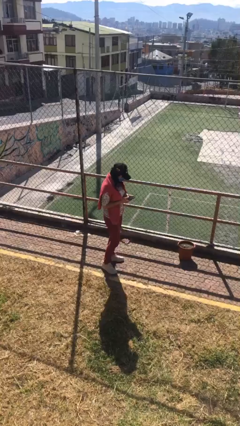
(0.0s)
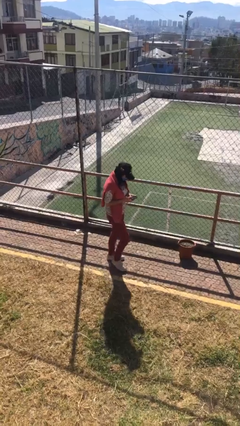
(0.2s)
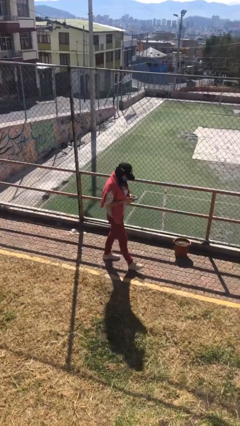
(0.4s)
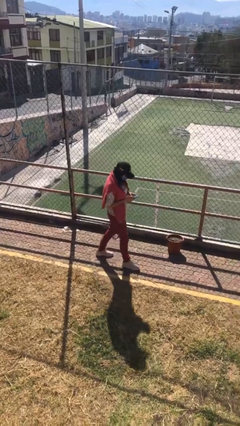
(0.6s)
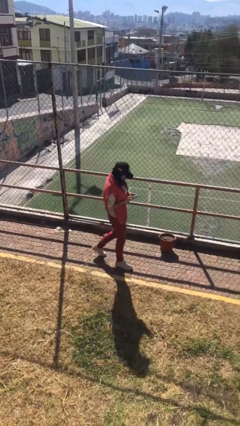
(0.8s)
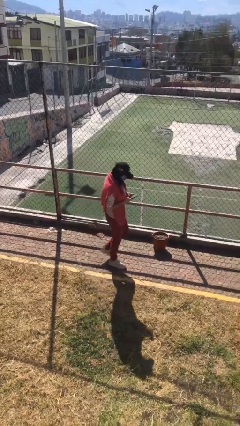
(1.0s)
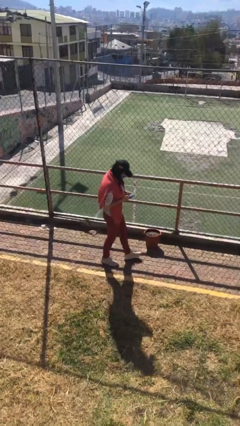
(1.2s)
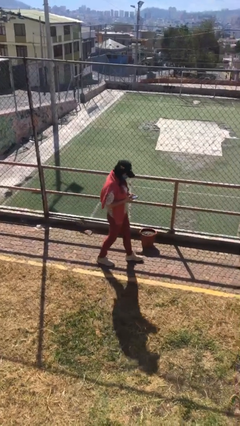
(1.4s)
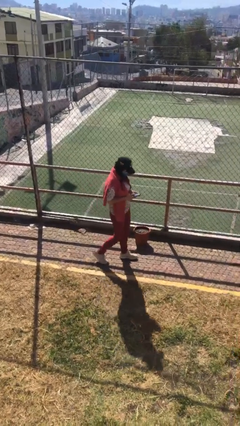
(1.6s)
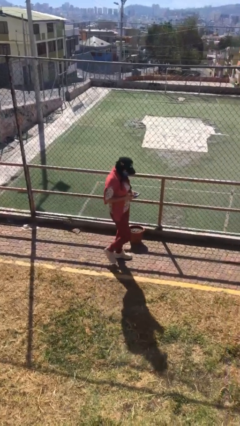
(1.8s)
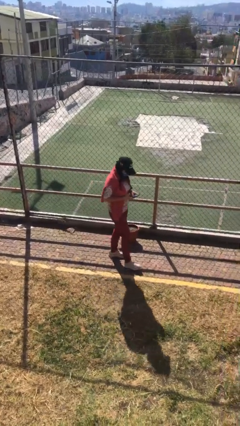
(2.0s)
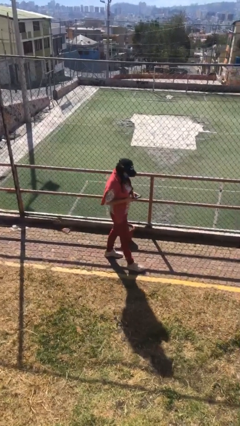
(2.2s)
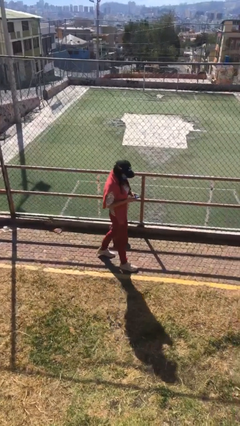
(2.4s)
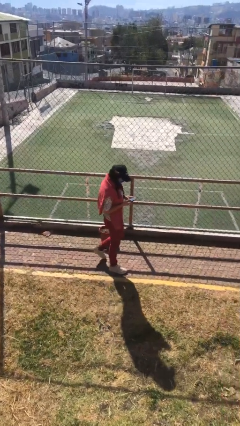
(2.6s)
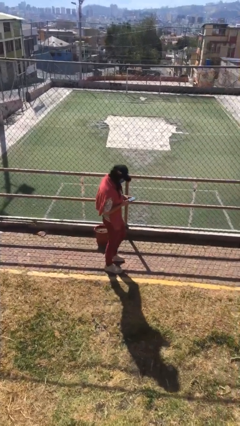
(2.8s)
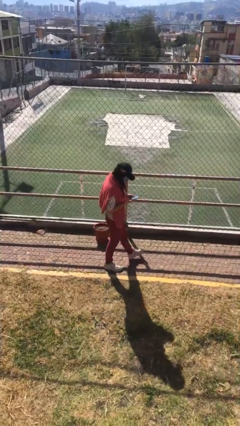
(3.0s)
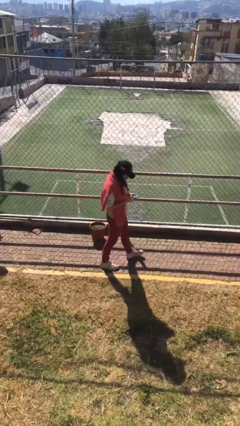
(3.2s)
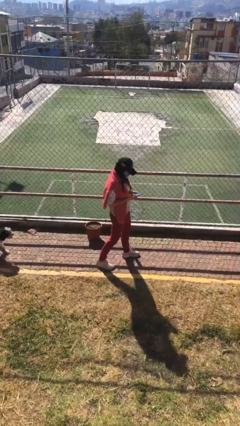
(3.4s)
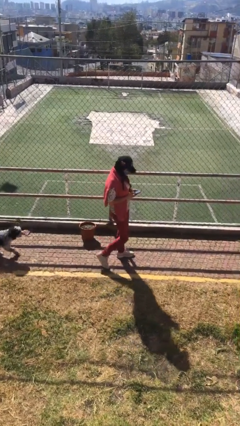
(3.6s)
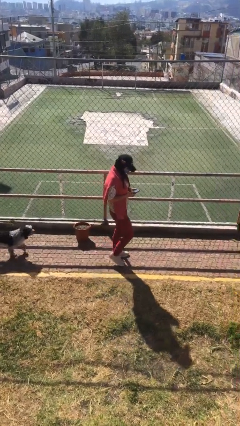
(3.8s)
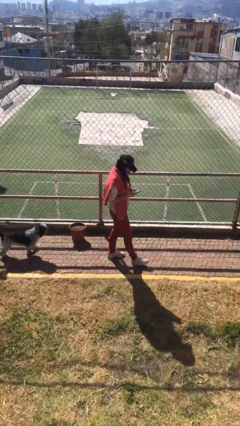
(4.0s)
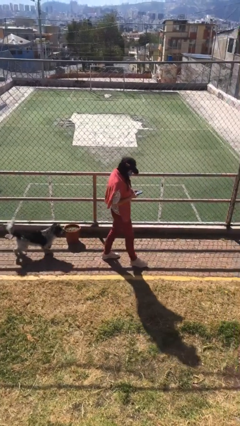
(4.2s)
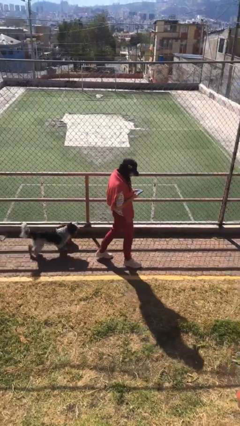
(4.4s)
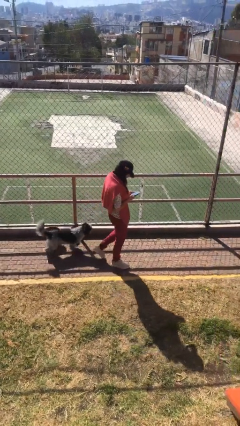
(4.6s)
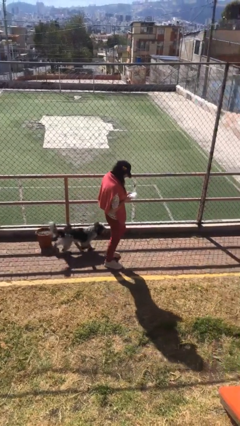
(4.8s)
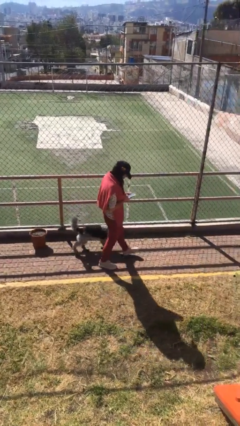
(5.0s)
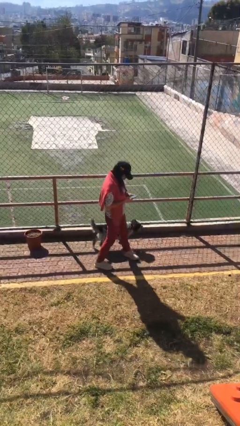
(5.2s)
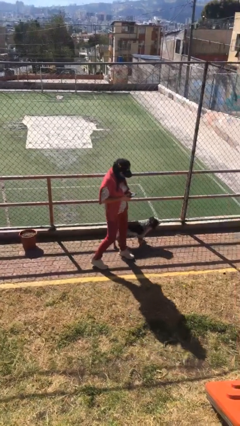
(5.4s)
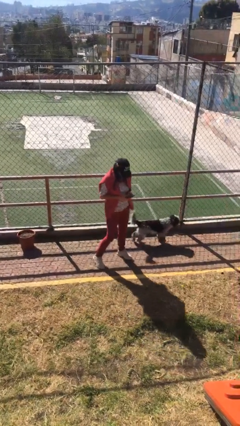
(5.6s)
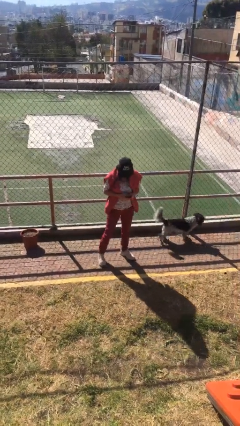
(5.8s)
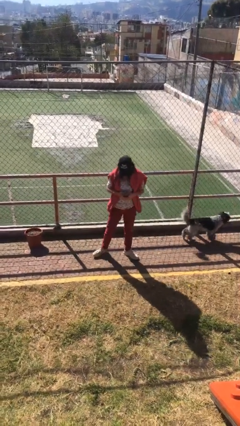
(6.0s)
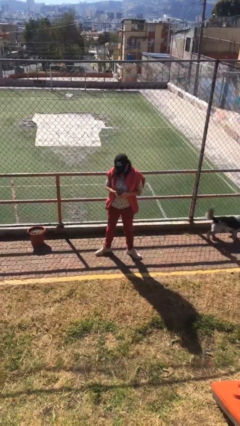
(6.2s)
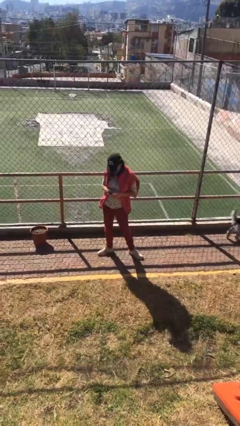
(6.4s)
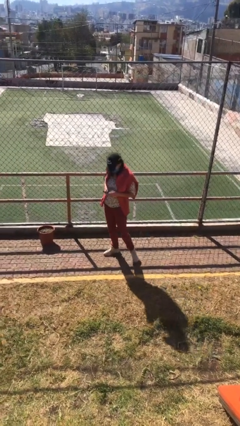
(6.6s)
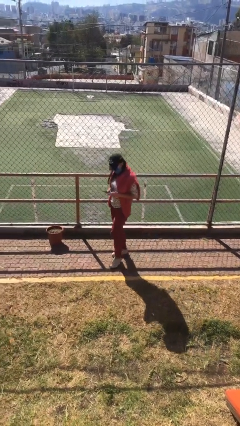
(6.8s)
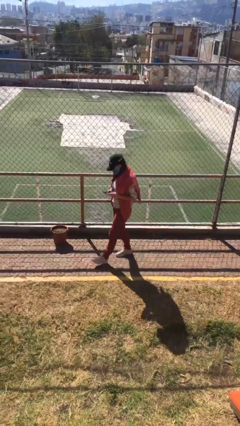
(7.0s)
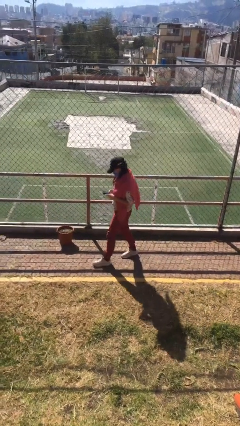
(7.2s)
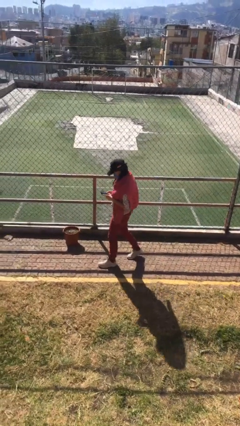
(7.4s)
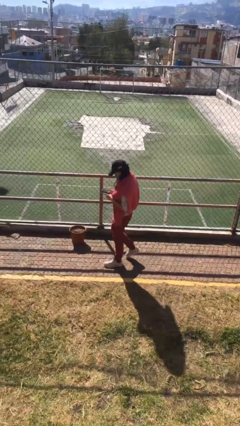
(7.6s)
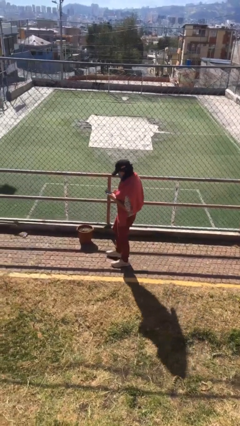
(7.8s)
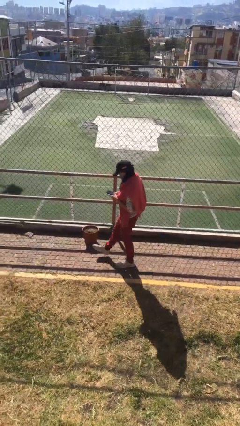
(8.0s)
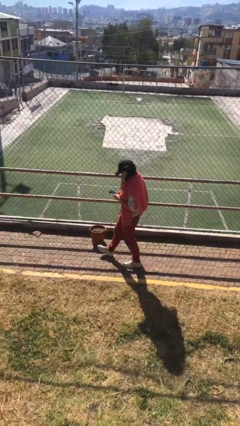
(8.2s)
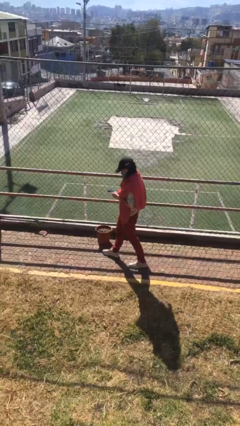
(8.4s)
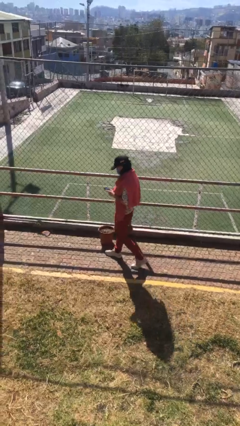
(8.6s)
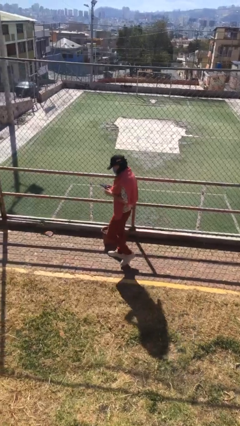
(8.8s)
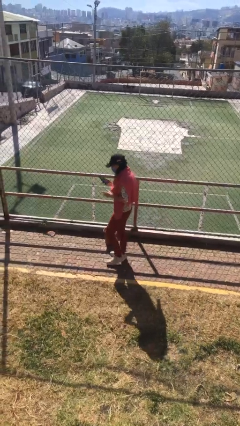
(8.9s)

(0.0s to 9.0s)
person texts on phone

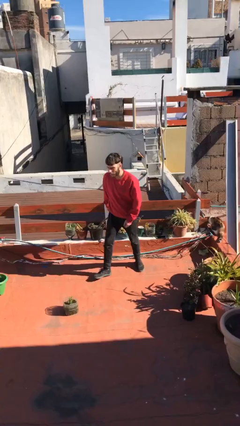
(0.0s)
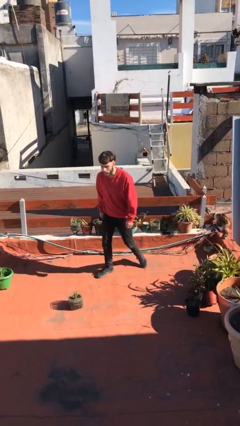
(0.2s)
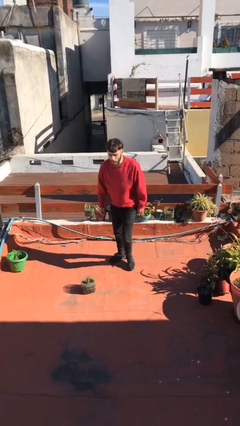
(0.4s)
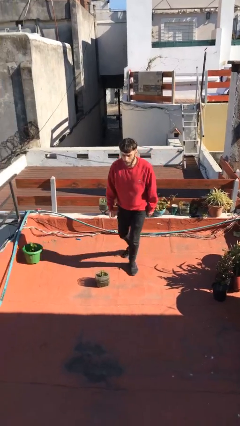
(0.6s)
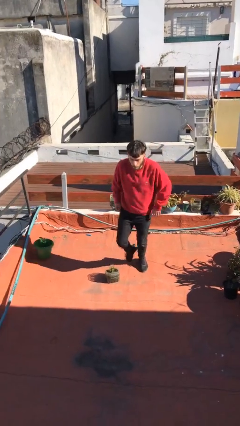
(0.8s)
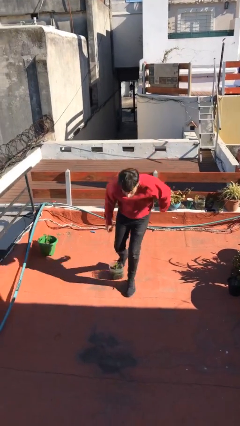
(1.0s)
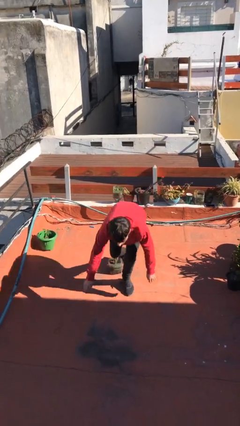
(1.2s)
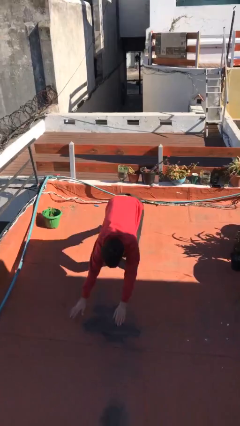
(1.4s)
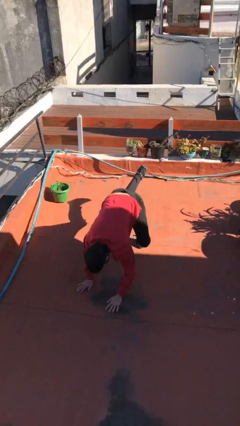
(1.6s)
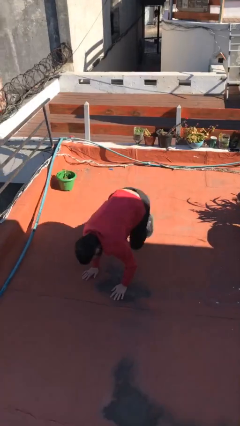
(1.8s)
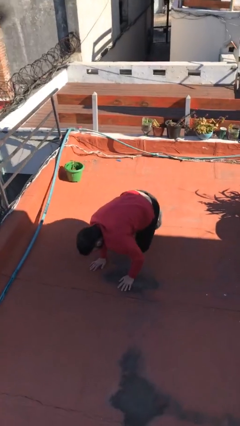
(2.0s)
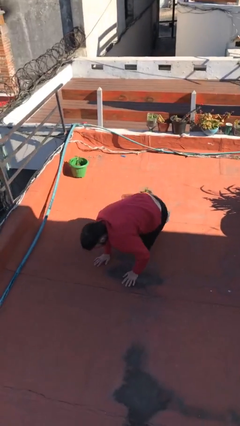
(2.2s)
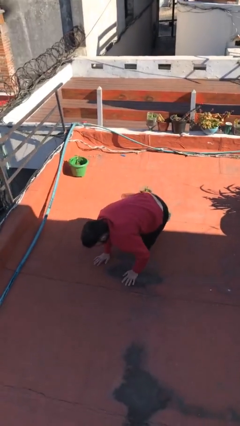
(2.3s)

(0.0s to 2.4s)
person trips on object on floor

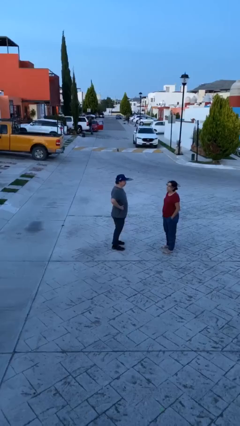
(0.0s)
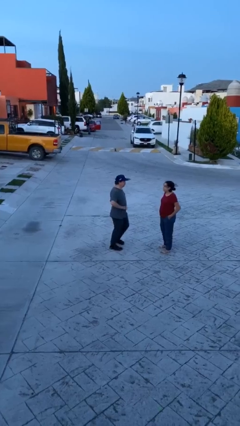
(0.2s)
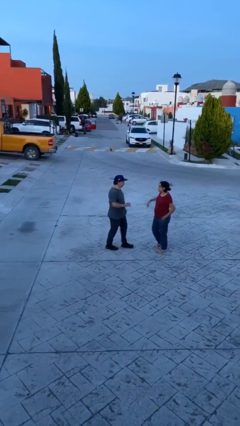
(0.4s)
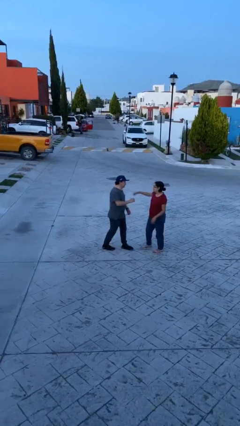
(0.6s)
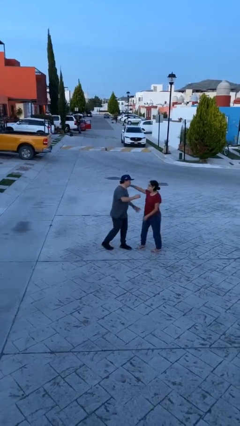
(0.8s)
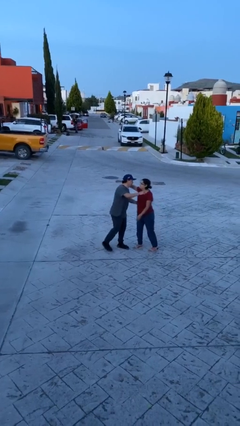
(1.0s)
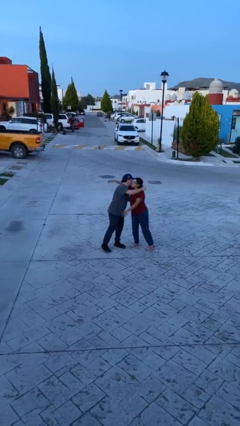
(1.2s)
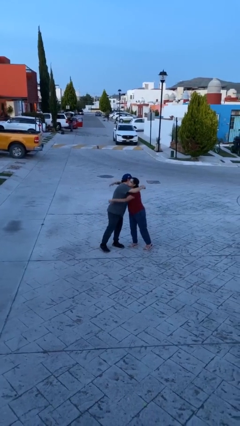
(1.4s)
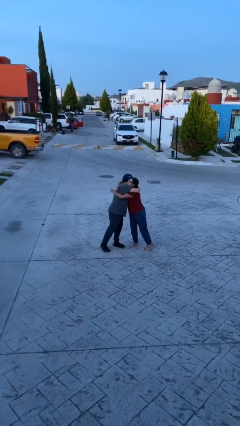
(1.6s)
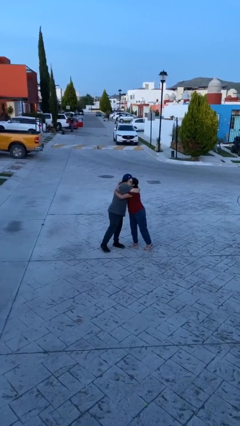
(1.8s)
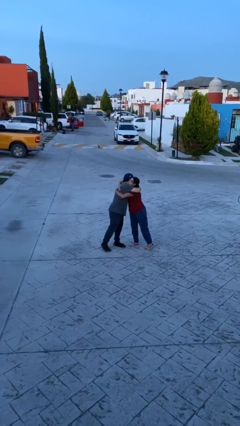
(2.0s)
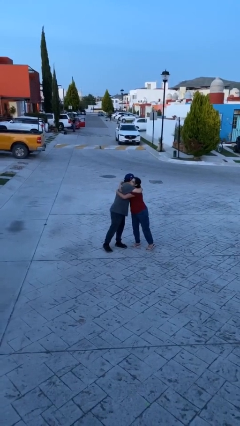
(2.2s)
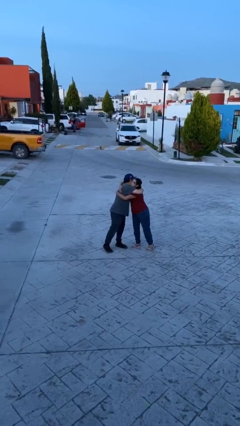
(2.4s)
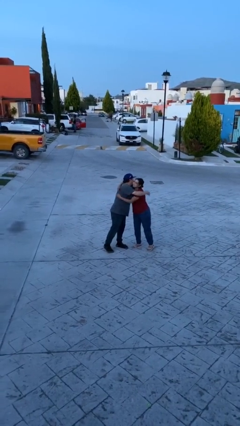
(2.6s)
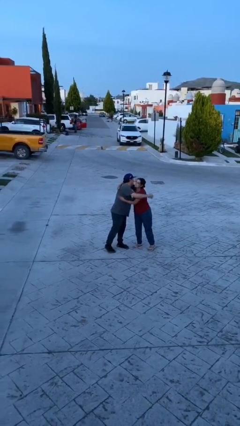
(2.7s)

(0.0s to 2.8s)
person embraces person

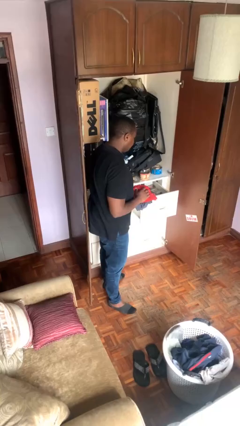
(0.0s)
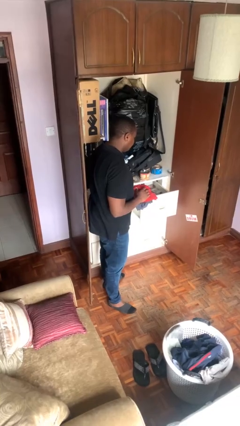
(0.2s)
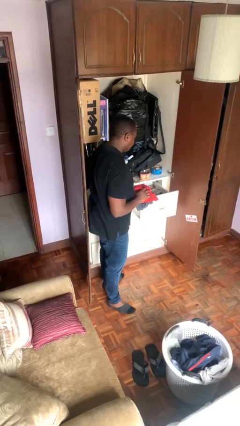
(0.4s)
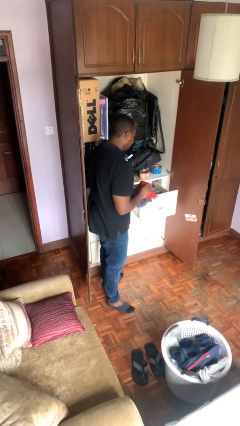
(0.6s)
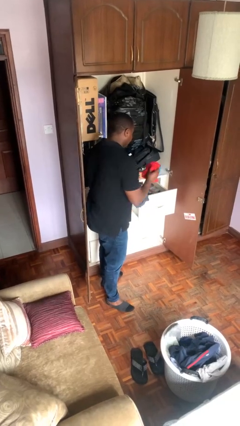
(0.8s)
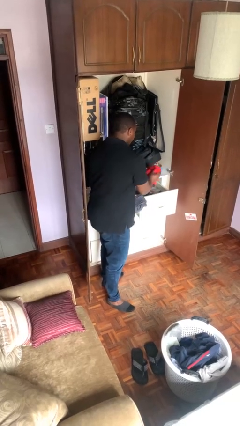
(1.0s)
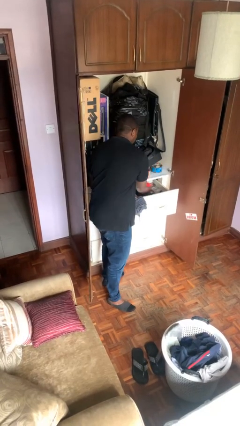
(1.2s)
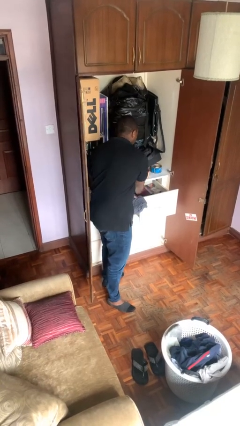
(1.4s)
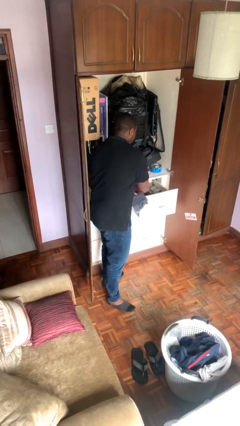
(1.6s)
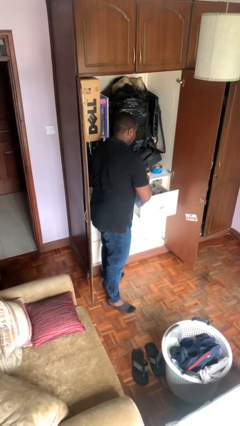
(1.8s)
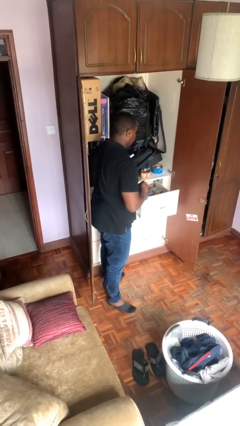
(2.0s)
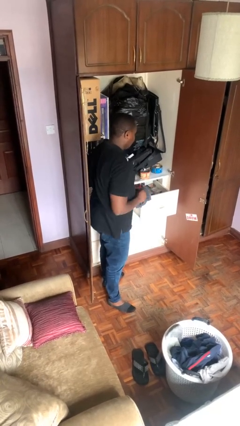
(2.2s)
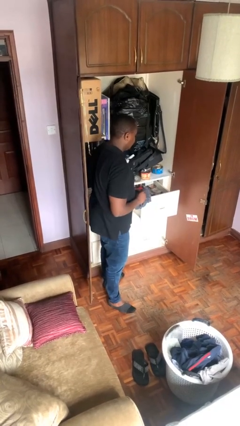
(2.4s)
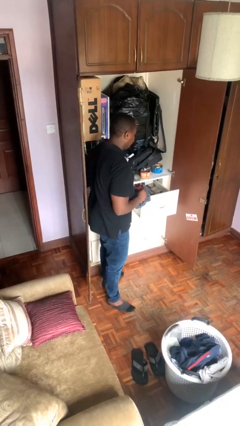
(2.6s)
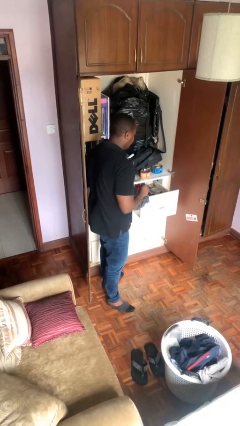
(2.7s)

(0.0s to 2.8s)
person puts clothes into dresser

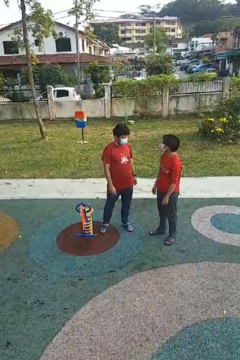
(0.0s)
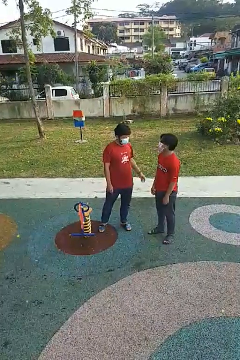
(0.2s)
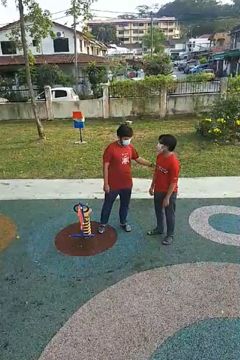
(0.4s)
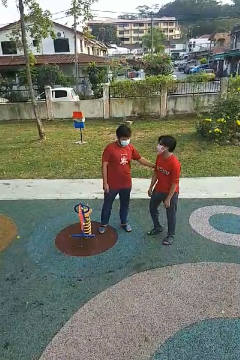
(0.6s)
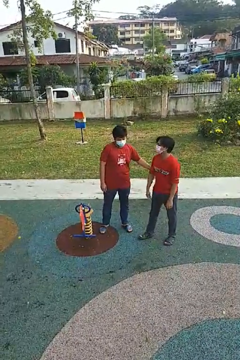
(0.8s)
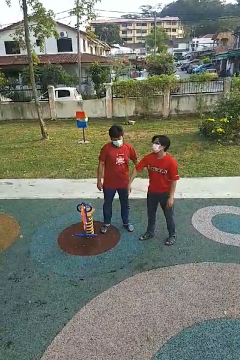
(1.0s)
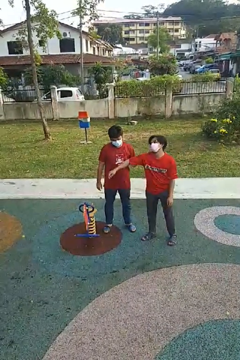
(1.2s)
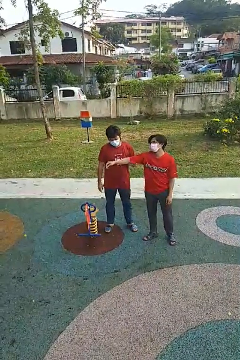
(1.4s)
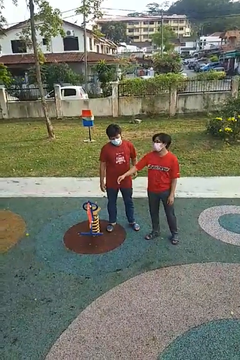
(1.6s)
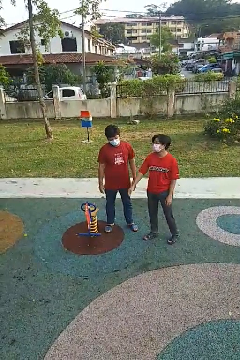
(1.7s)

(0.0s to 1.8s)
person grabs person by bicep
